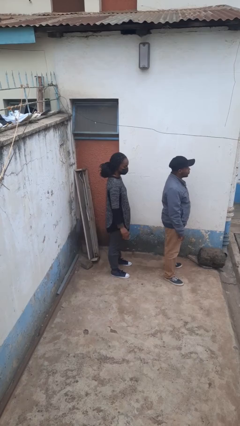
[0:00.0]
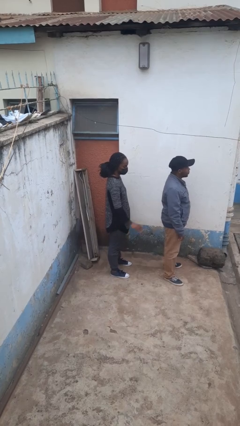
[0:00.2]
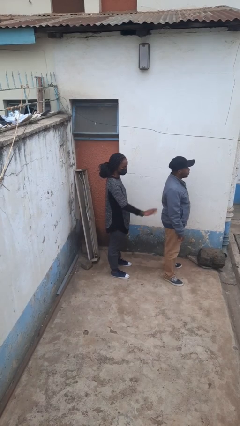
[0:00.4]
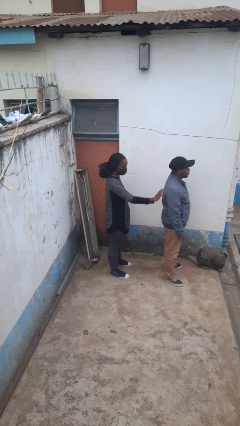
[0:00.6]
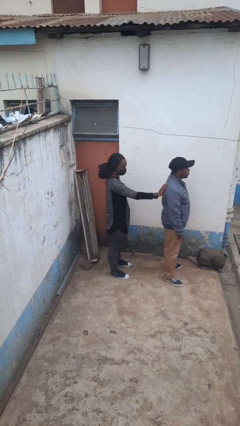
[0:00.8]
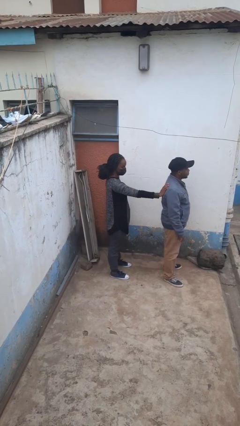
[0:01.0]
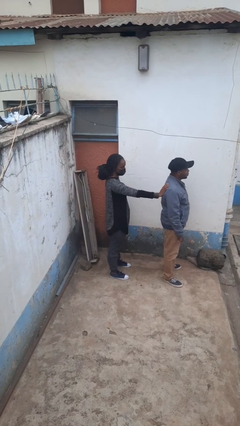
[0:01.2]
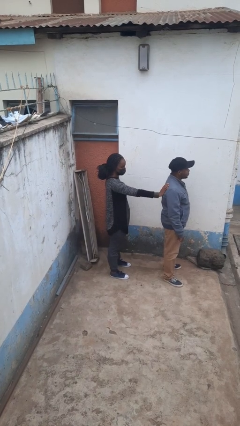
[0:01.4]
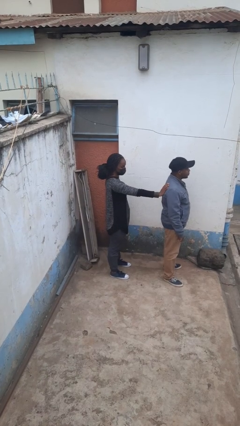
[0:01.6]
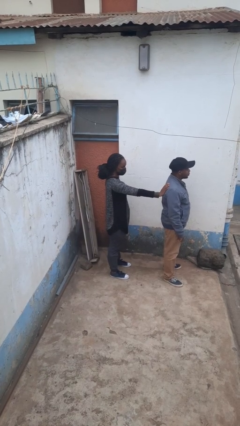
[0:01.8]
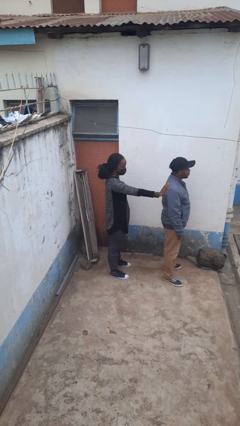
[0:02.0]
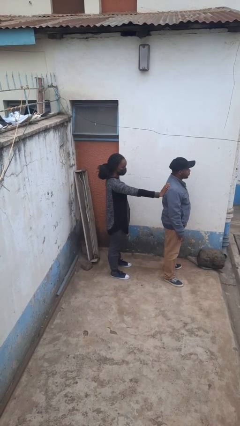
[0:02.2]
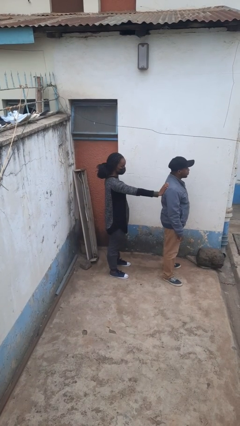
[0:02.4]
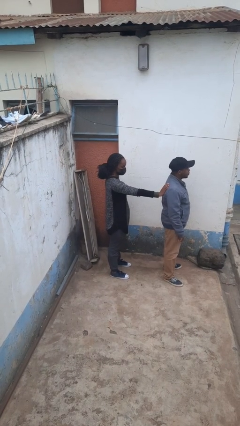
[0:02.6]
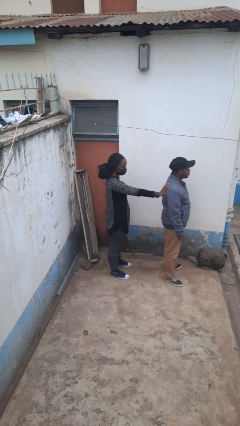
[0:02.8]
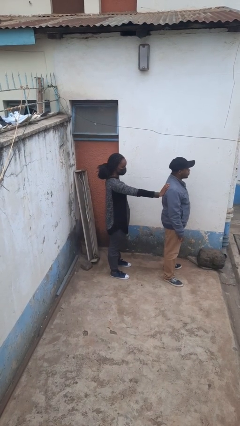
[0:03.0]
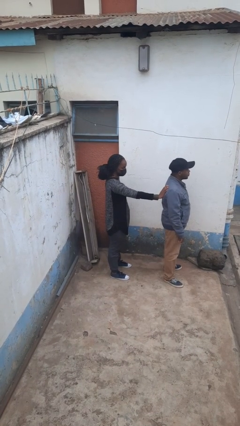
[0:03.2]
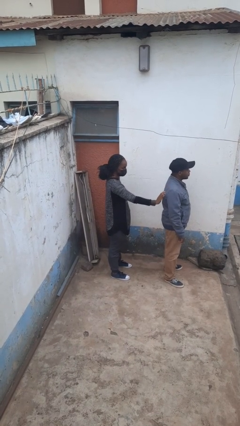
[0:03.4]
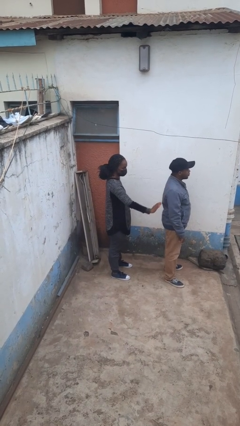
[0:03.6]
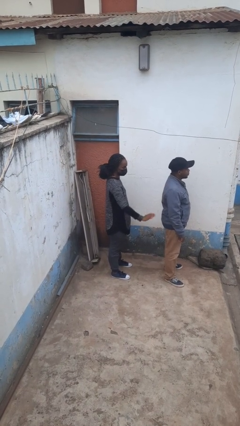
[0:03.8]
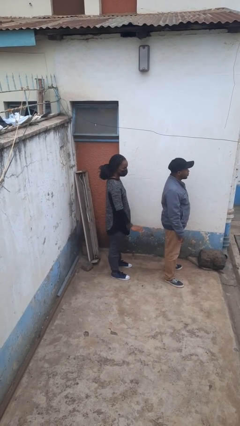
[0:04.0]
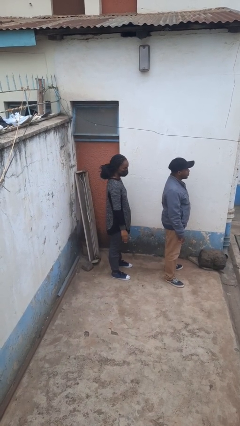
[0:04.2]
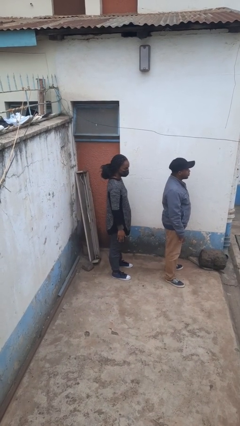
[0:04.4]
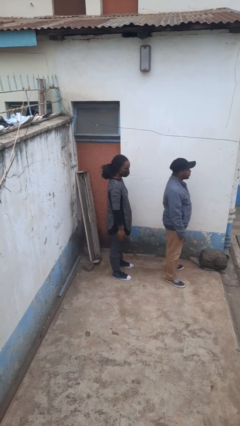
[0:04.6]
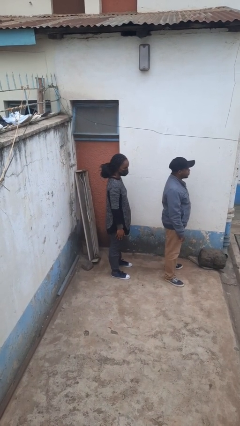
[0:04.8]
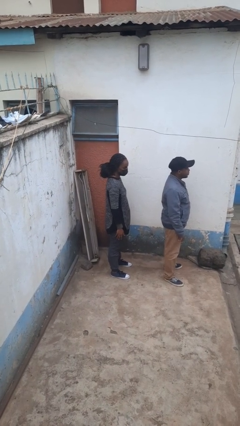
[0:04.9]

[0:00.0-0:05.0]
person touches back of person

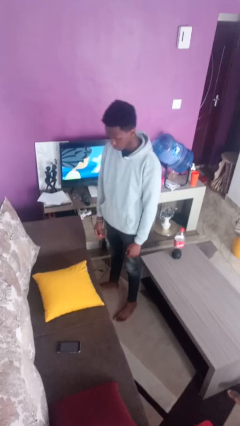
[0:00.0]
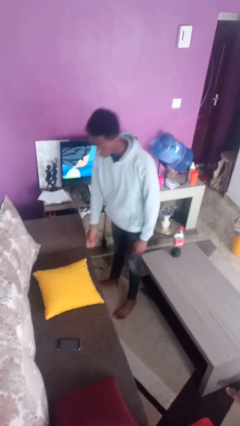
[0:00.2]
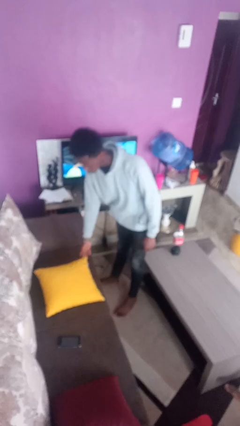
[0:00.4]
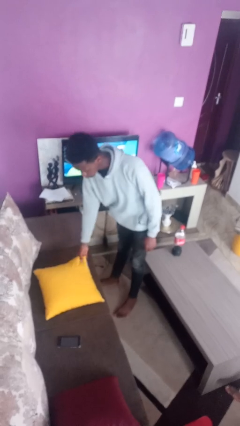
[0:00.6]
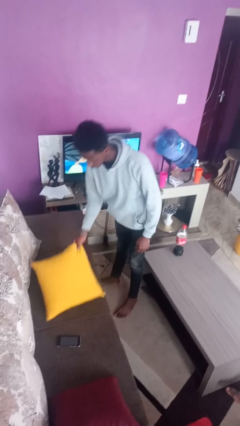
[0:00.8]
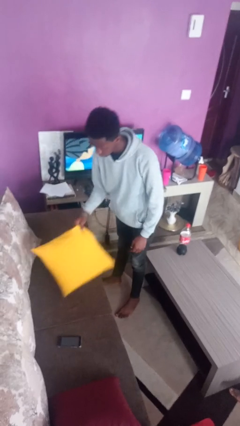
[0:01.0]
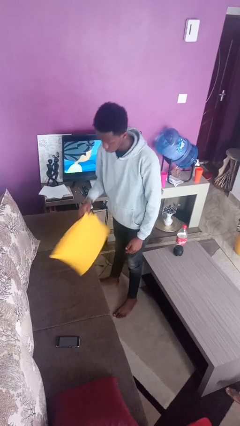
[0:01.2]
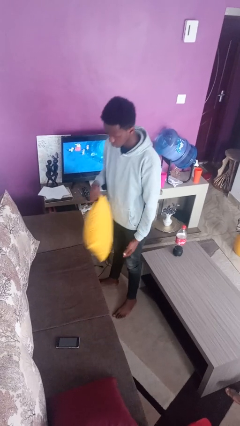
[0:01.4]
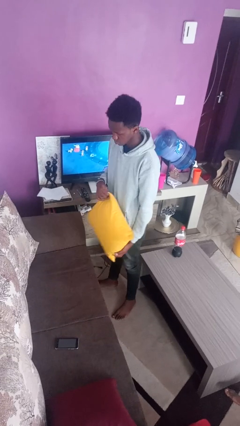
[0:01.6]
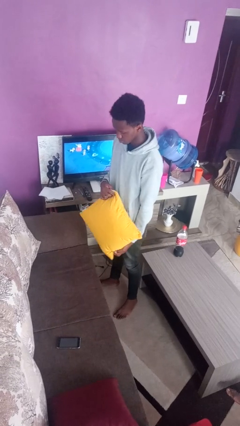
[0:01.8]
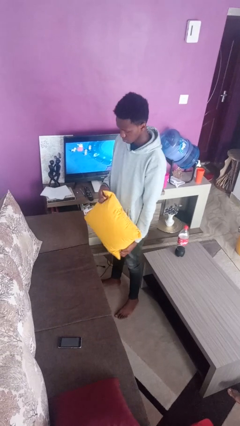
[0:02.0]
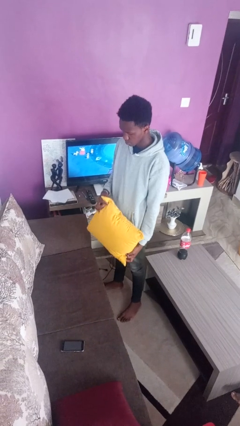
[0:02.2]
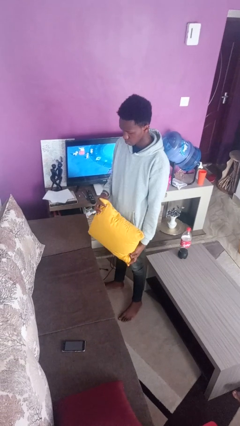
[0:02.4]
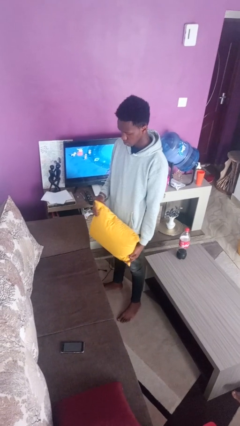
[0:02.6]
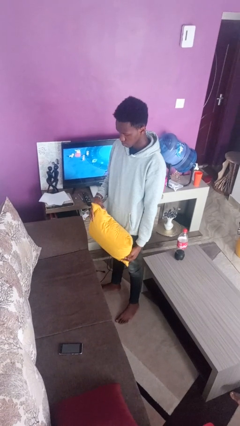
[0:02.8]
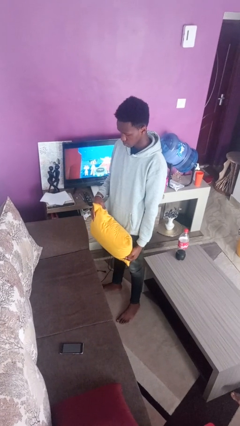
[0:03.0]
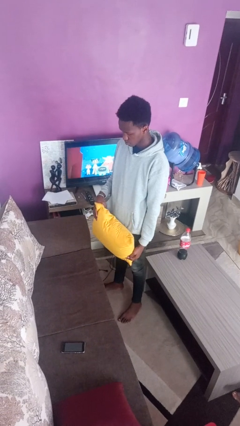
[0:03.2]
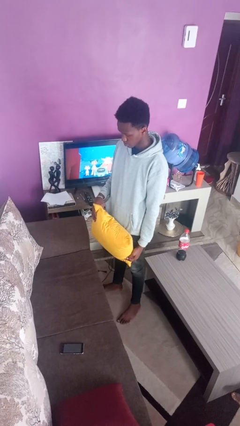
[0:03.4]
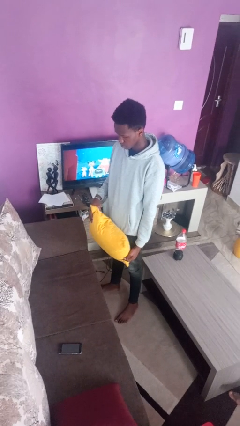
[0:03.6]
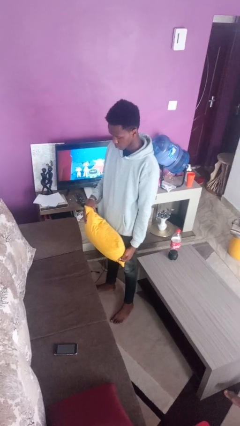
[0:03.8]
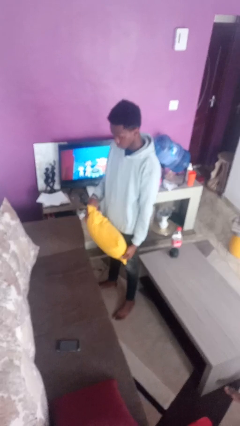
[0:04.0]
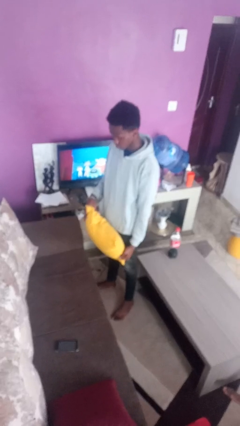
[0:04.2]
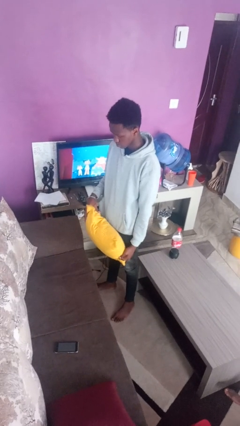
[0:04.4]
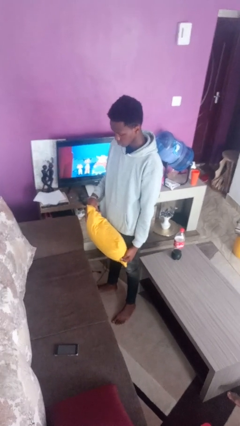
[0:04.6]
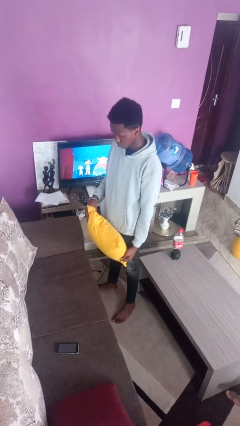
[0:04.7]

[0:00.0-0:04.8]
person picks up object from couch

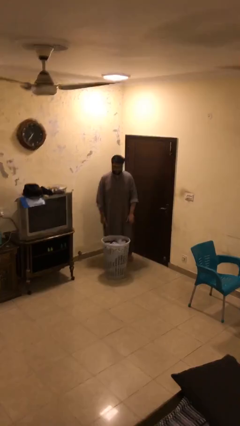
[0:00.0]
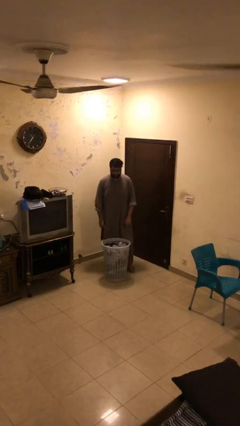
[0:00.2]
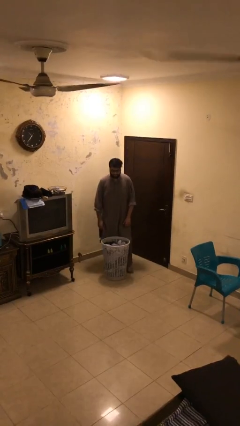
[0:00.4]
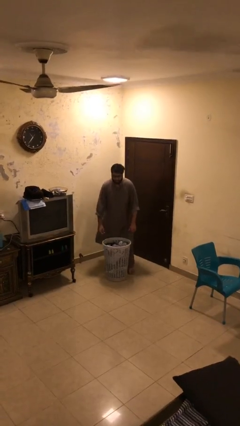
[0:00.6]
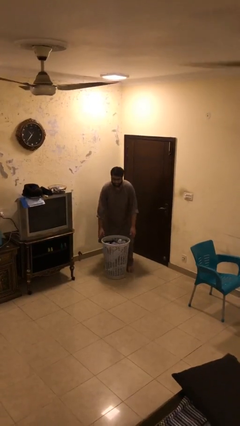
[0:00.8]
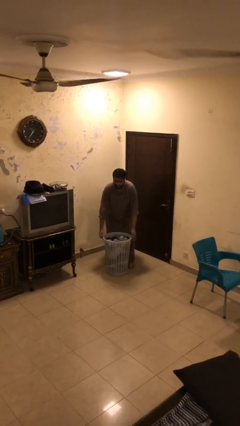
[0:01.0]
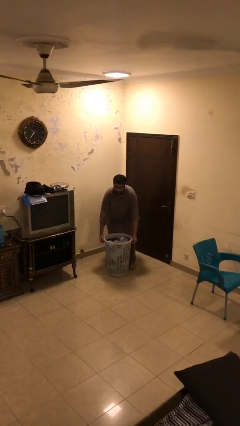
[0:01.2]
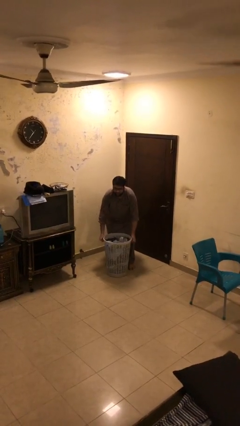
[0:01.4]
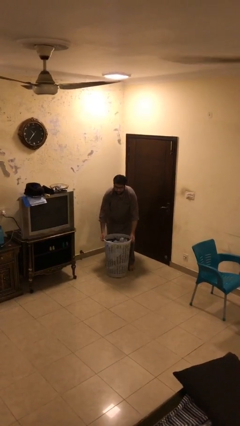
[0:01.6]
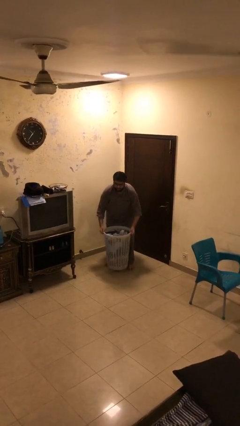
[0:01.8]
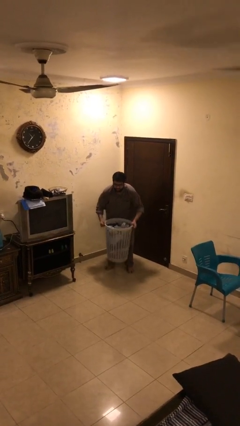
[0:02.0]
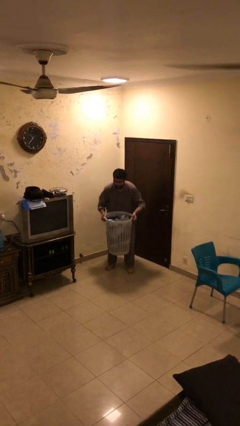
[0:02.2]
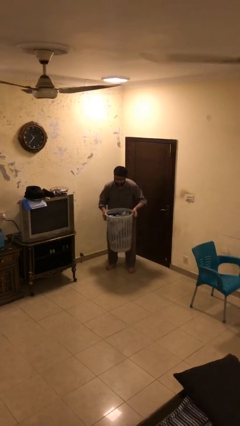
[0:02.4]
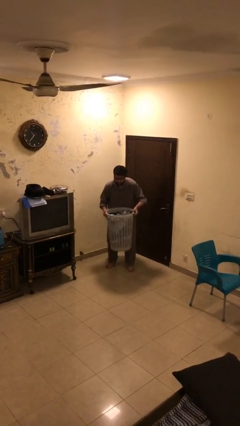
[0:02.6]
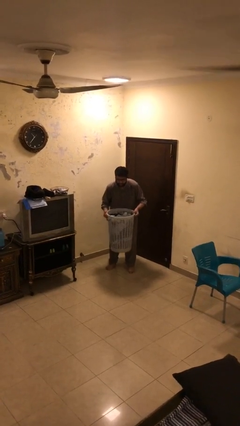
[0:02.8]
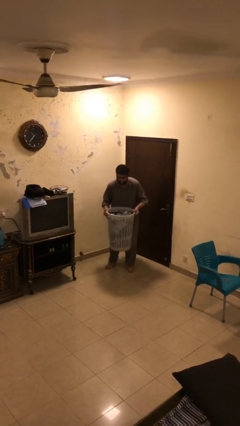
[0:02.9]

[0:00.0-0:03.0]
person picks up object from floor

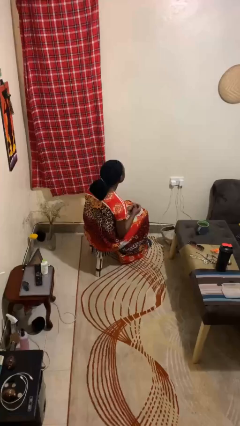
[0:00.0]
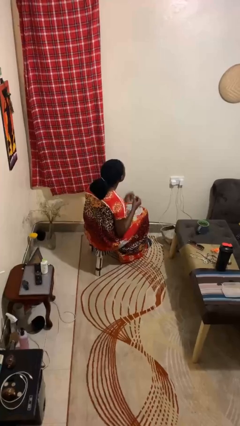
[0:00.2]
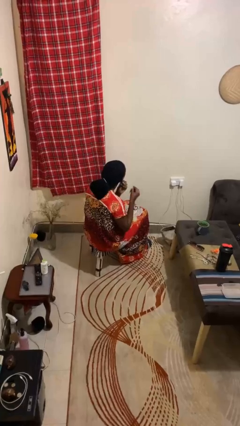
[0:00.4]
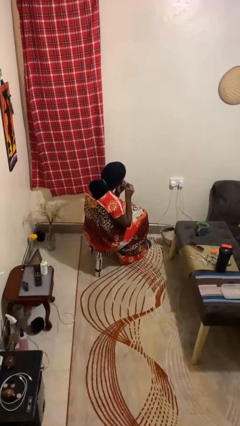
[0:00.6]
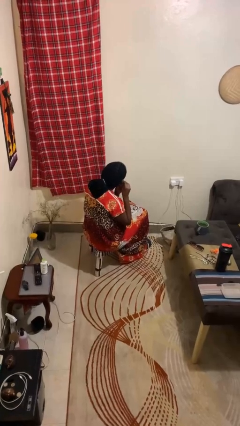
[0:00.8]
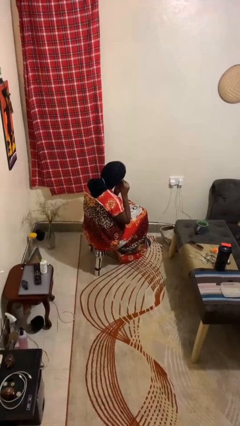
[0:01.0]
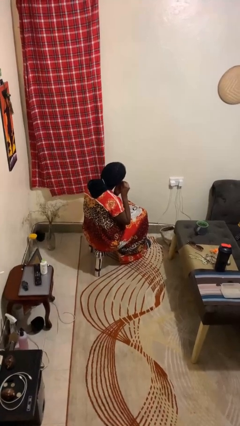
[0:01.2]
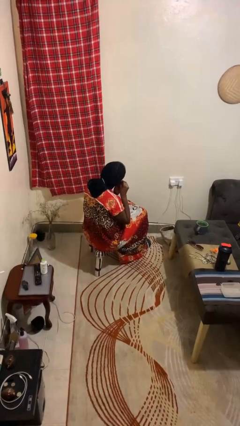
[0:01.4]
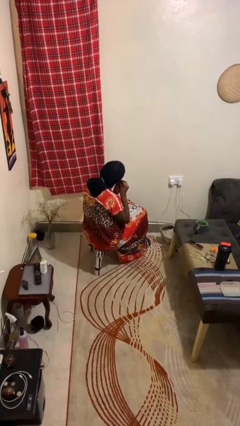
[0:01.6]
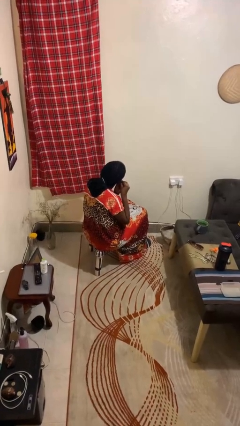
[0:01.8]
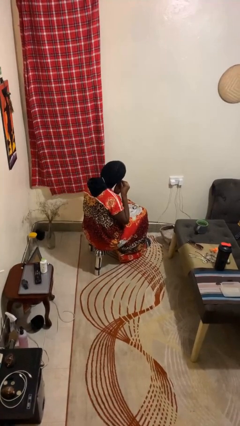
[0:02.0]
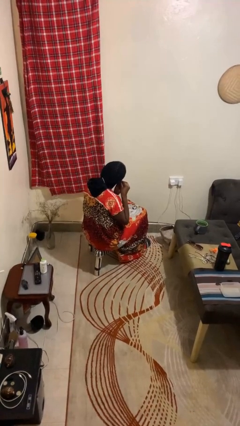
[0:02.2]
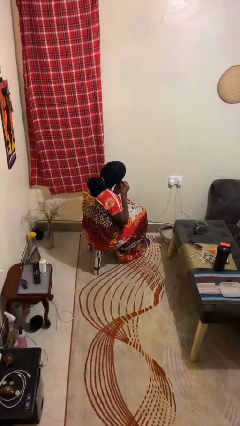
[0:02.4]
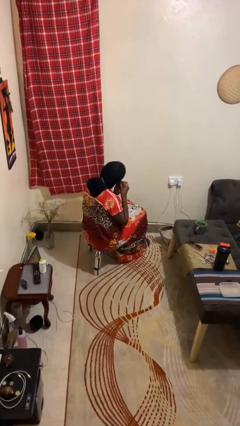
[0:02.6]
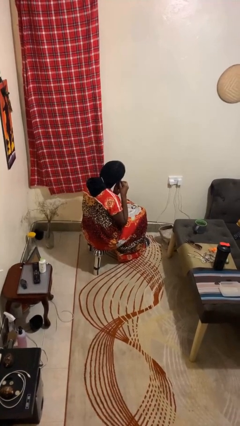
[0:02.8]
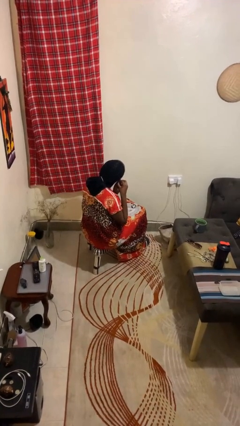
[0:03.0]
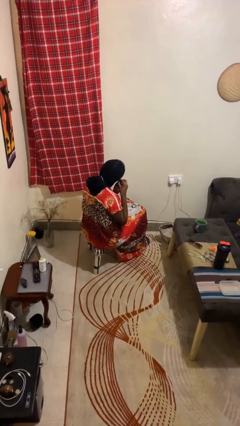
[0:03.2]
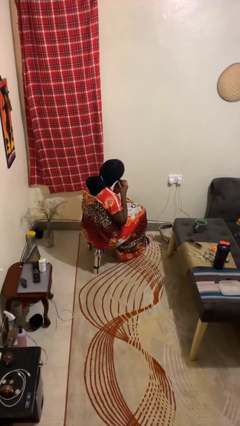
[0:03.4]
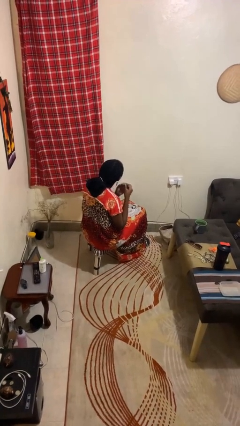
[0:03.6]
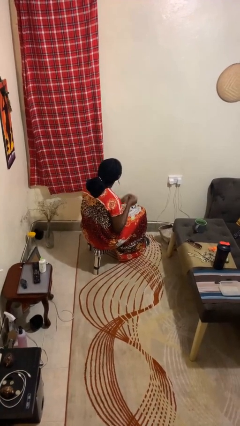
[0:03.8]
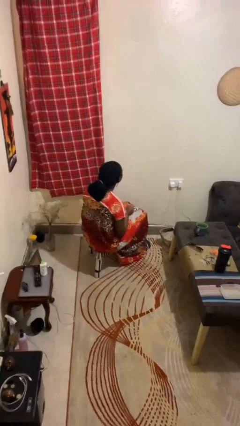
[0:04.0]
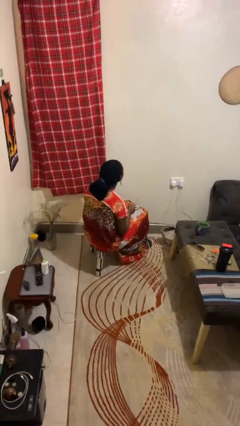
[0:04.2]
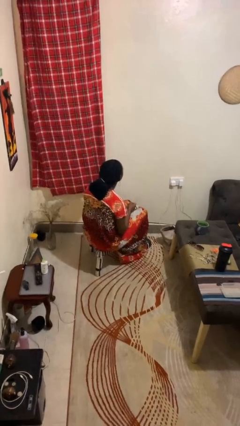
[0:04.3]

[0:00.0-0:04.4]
person puts on earrings

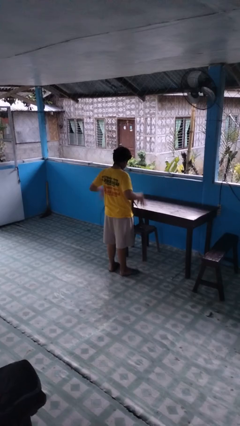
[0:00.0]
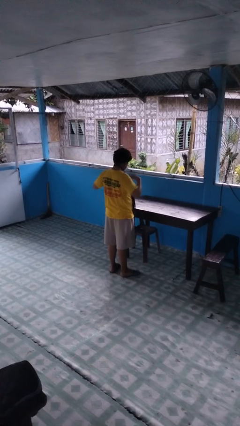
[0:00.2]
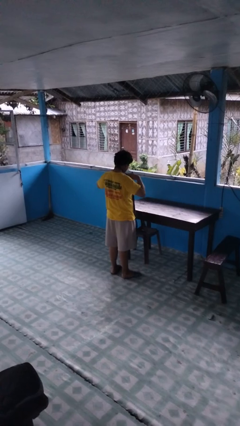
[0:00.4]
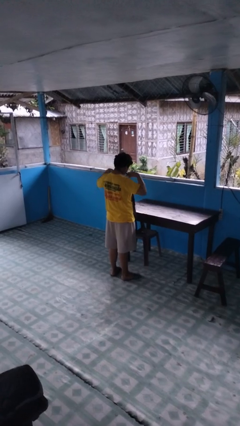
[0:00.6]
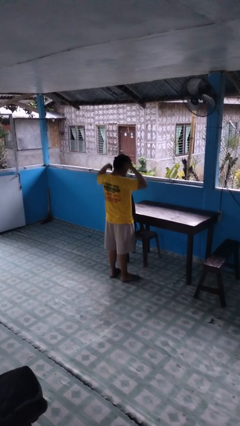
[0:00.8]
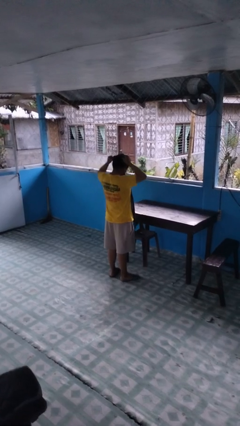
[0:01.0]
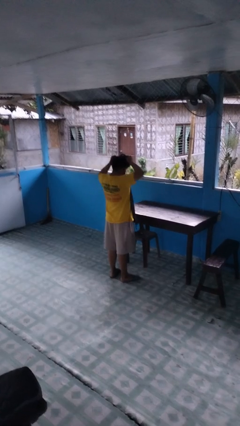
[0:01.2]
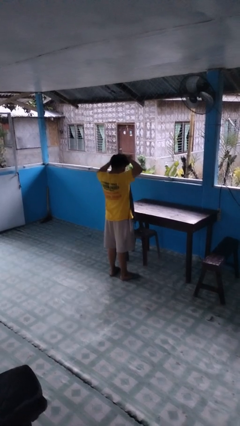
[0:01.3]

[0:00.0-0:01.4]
person takes off apron
